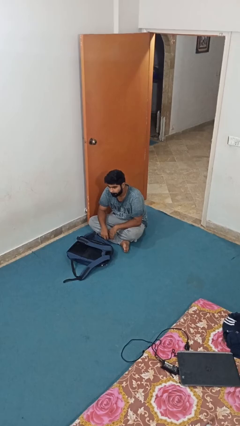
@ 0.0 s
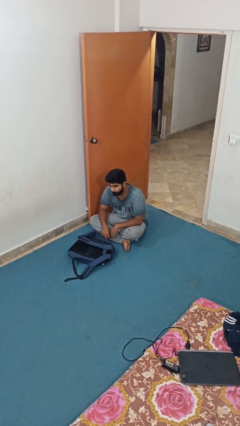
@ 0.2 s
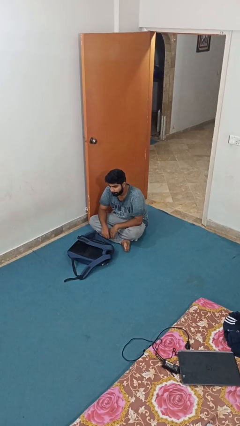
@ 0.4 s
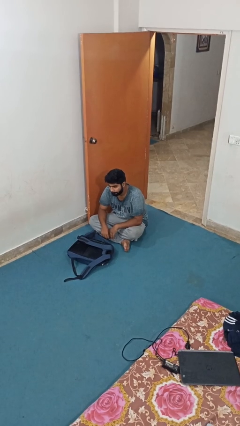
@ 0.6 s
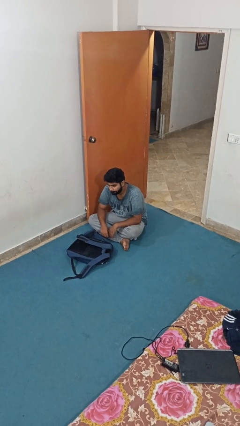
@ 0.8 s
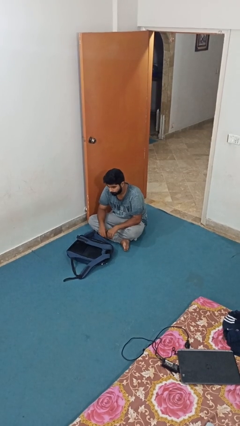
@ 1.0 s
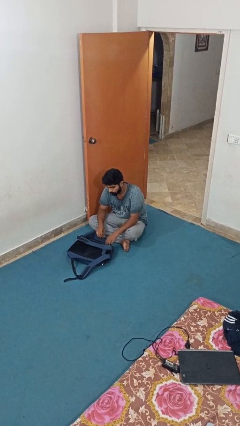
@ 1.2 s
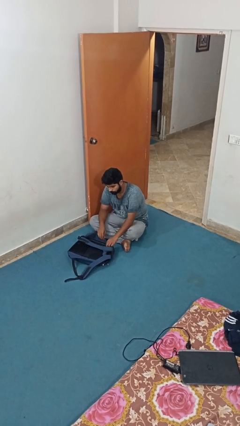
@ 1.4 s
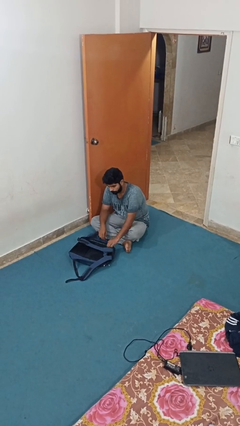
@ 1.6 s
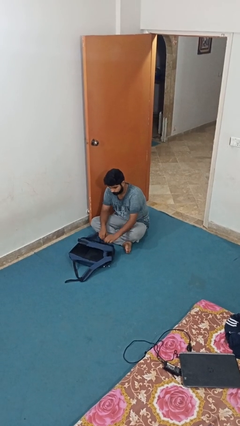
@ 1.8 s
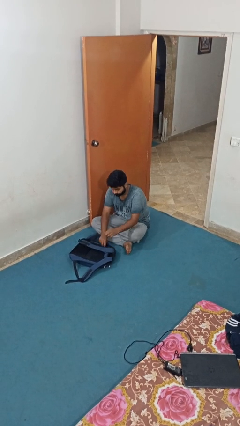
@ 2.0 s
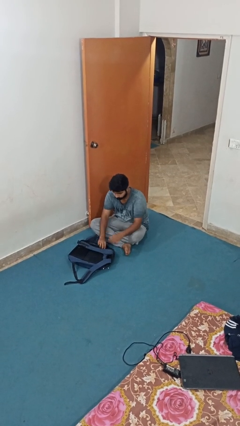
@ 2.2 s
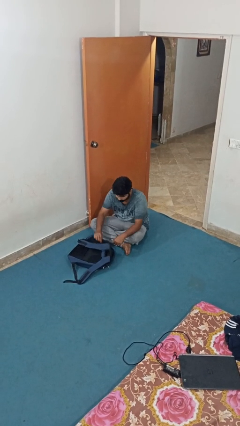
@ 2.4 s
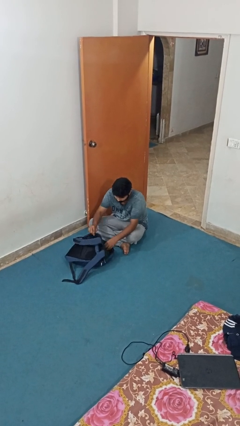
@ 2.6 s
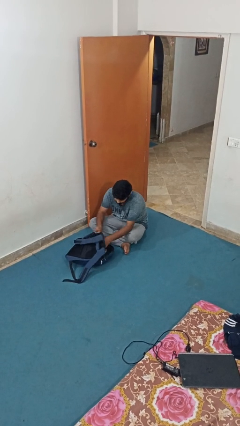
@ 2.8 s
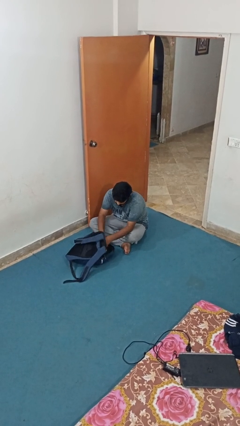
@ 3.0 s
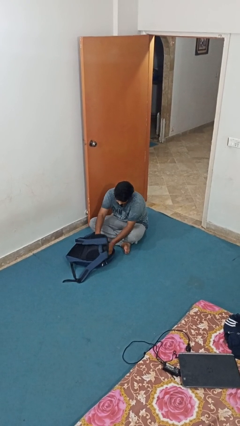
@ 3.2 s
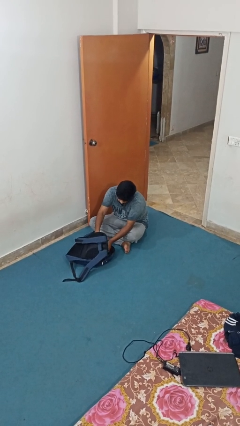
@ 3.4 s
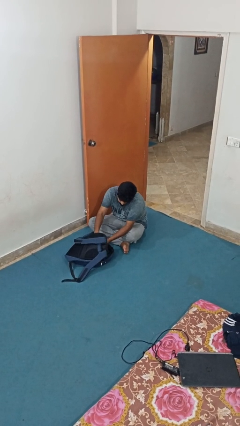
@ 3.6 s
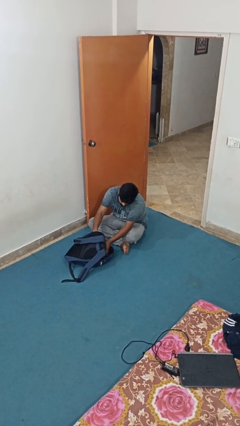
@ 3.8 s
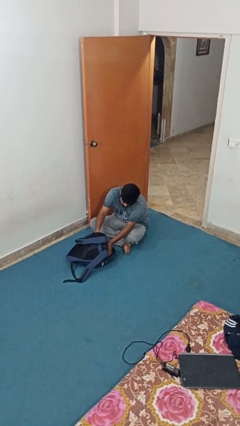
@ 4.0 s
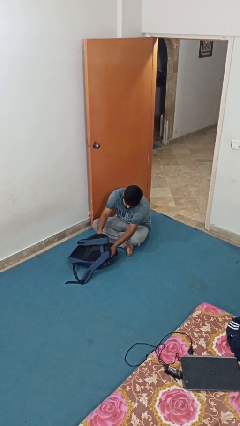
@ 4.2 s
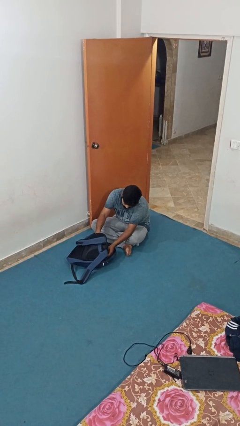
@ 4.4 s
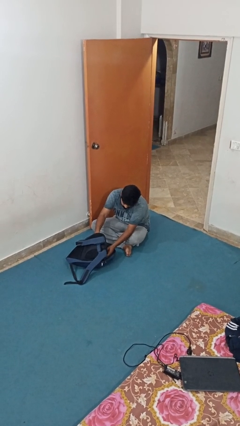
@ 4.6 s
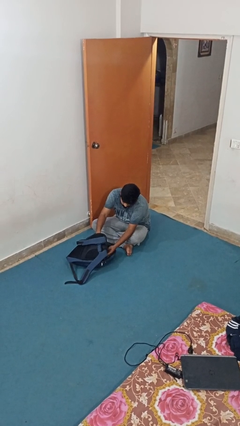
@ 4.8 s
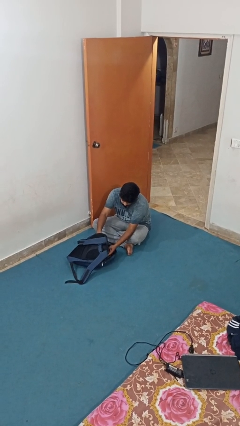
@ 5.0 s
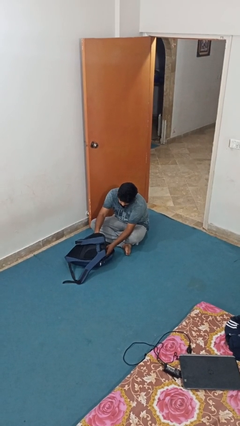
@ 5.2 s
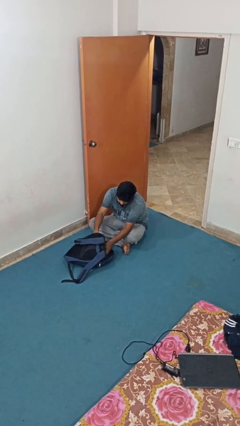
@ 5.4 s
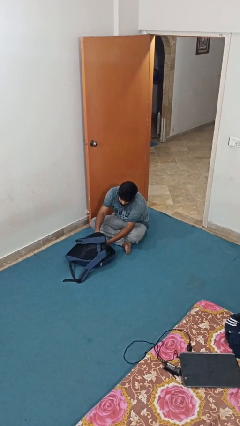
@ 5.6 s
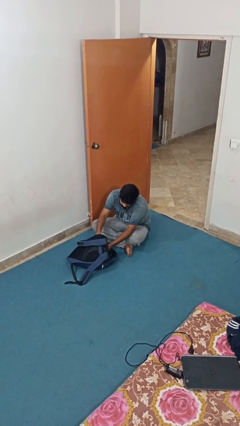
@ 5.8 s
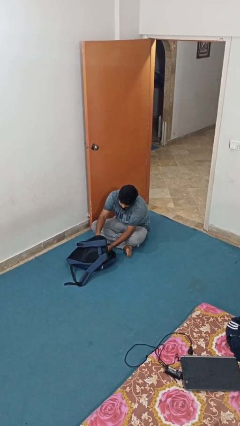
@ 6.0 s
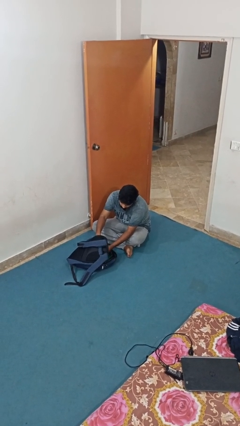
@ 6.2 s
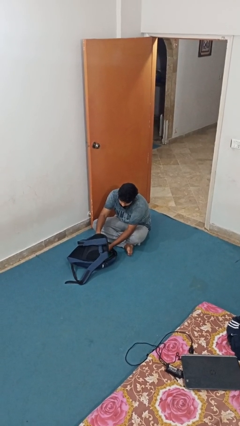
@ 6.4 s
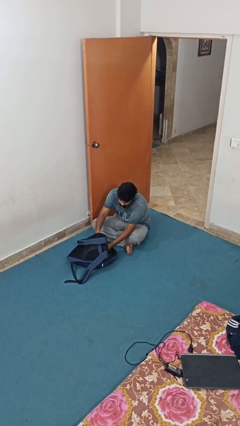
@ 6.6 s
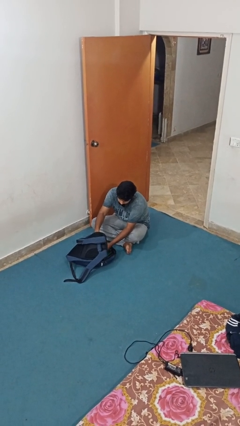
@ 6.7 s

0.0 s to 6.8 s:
person searches in backpack

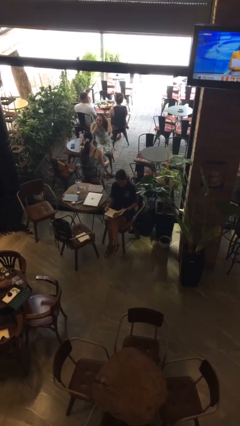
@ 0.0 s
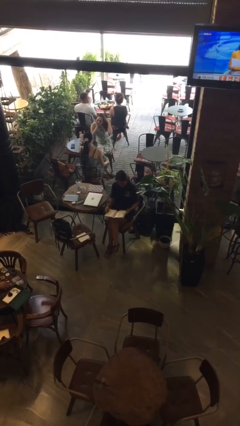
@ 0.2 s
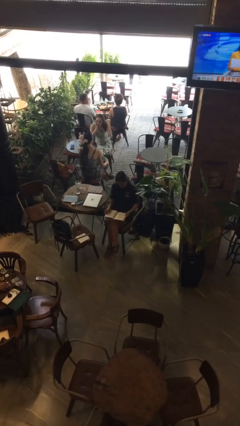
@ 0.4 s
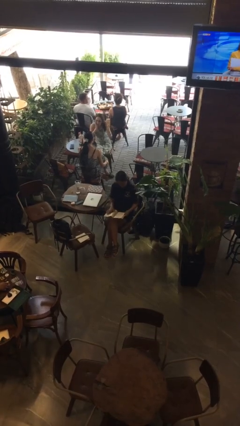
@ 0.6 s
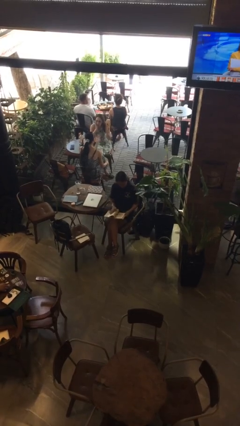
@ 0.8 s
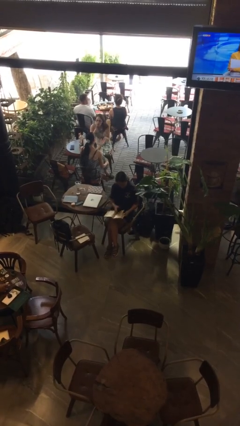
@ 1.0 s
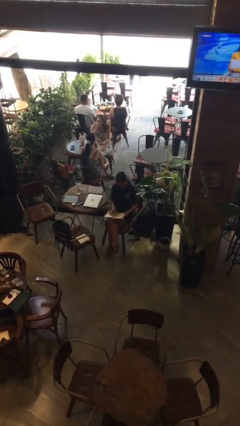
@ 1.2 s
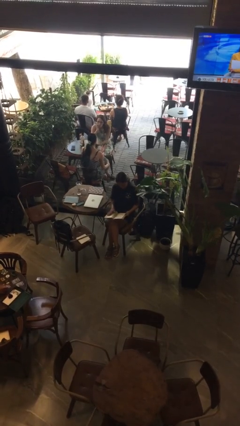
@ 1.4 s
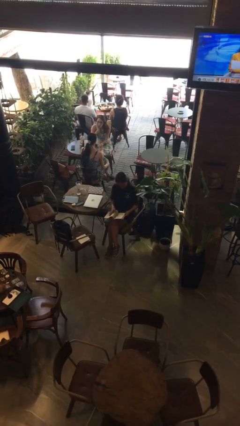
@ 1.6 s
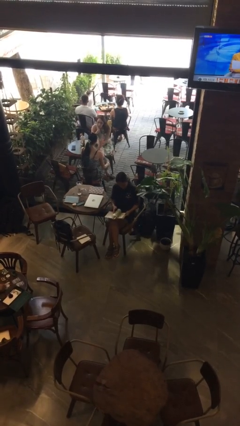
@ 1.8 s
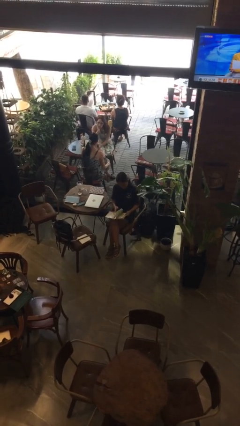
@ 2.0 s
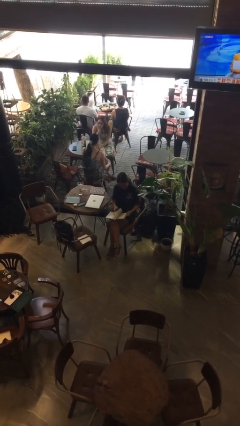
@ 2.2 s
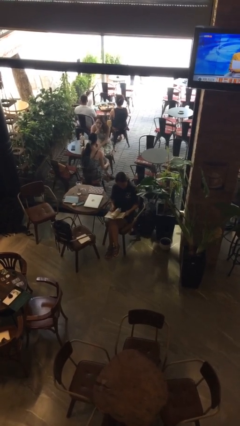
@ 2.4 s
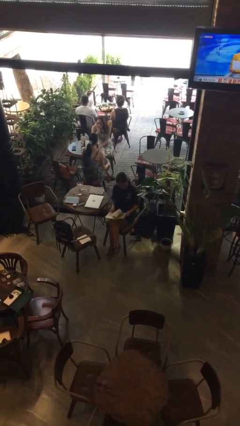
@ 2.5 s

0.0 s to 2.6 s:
person reads book

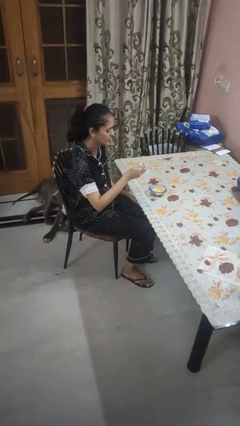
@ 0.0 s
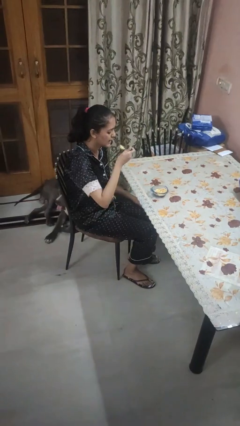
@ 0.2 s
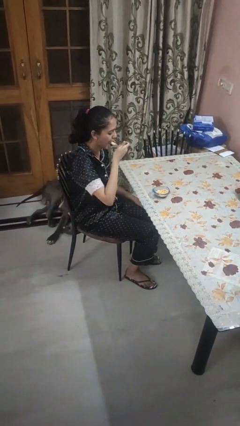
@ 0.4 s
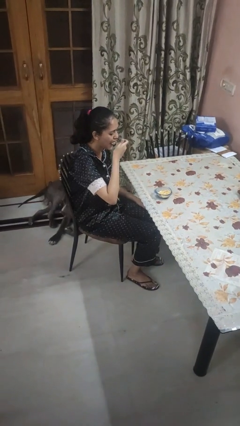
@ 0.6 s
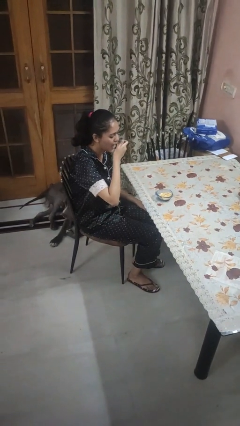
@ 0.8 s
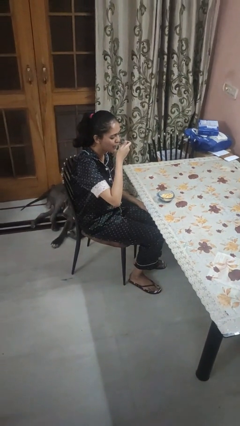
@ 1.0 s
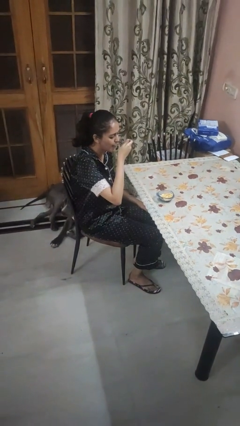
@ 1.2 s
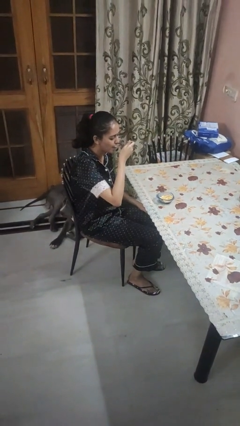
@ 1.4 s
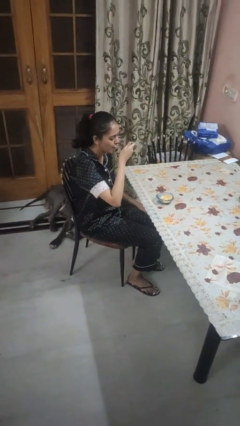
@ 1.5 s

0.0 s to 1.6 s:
person eats with utensil

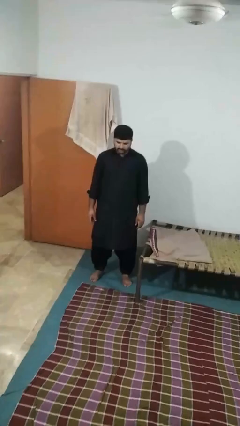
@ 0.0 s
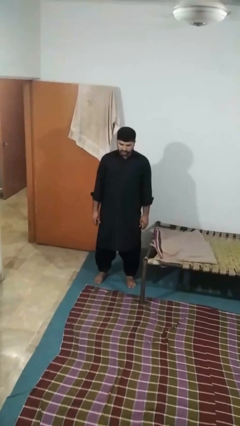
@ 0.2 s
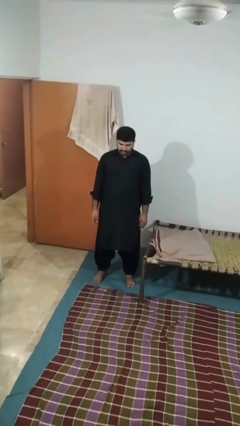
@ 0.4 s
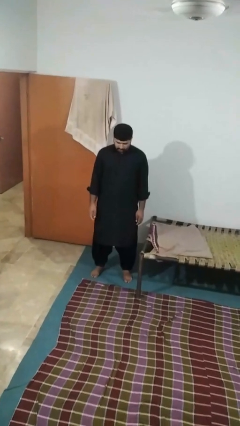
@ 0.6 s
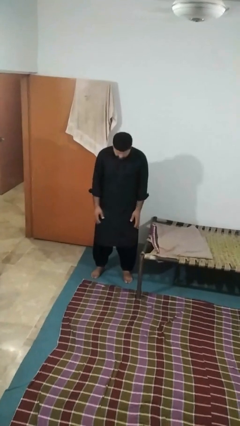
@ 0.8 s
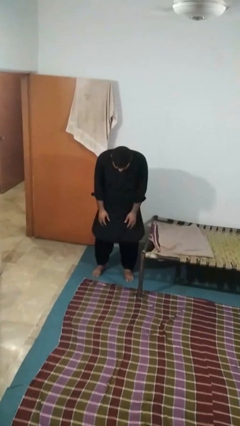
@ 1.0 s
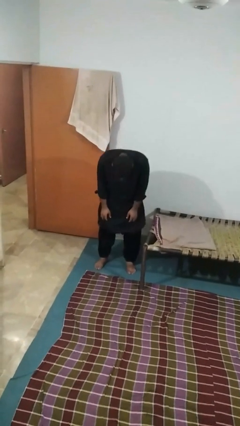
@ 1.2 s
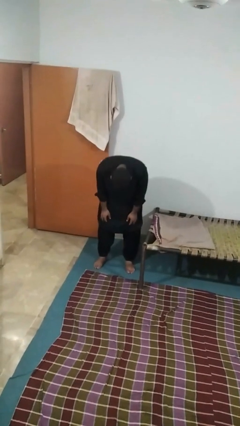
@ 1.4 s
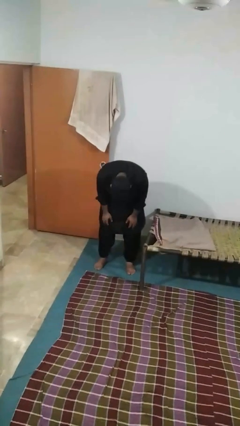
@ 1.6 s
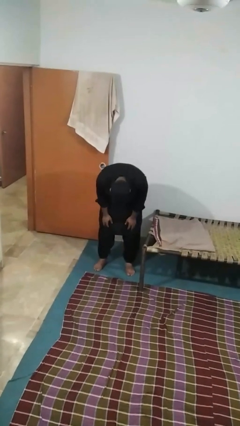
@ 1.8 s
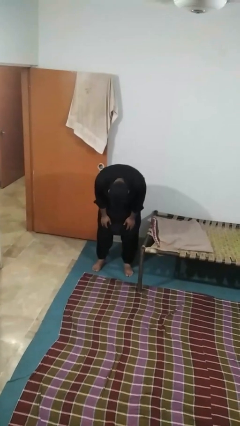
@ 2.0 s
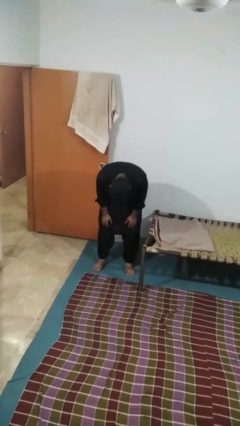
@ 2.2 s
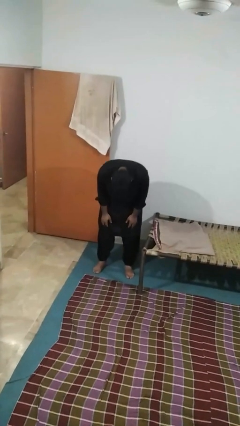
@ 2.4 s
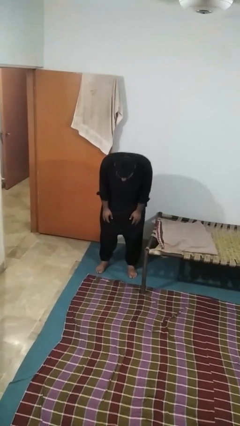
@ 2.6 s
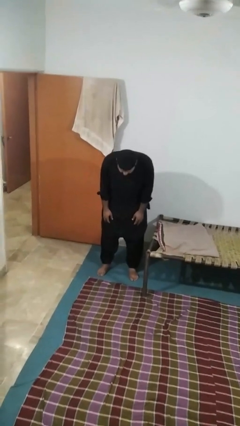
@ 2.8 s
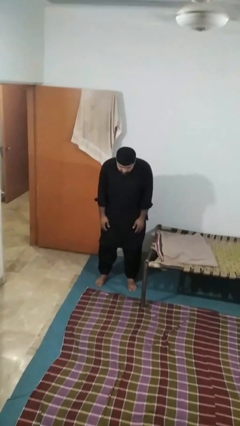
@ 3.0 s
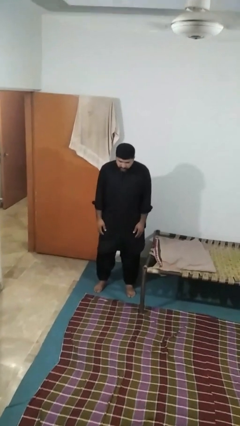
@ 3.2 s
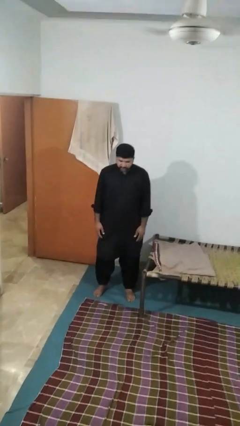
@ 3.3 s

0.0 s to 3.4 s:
person bows

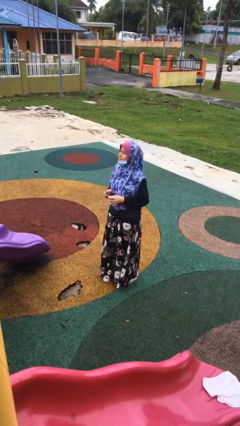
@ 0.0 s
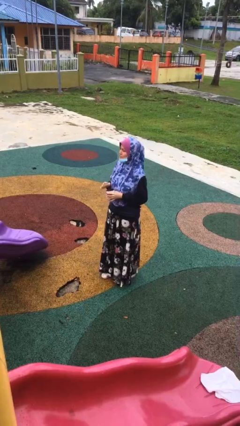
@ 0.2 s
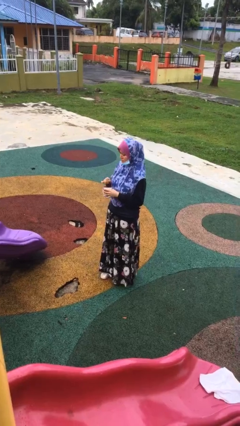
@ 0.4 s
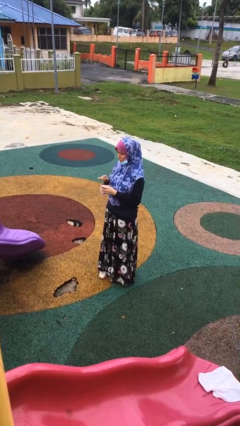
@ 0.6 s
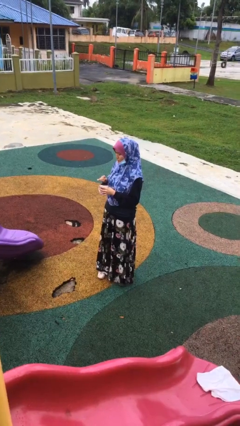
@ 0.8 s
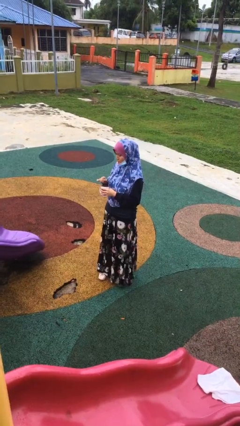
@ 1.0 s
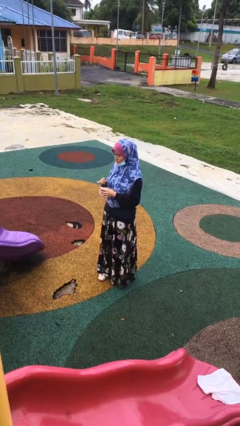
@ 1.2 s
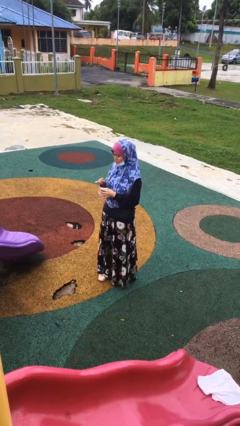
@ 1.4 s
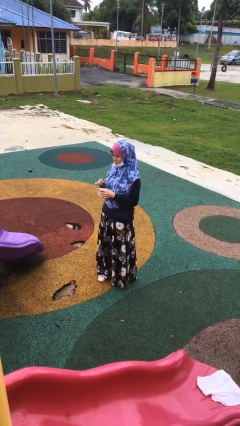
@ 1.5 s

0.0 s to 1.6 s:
person stirs mug

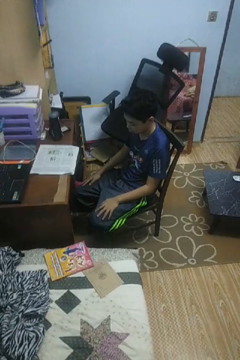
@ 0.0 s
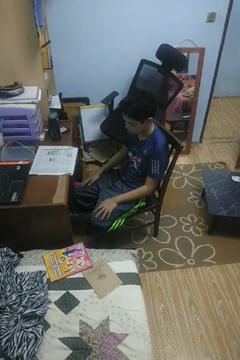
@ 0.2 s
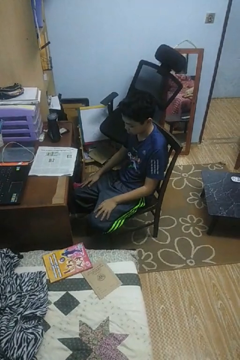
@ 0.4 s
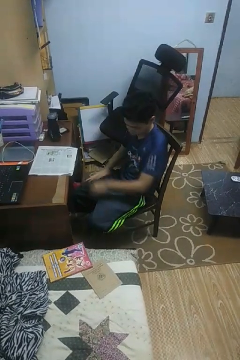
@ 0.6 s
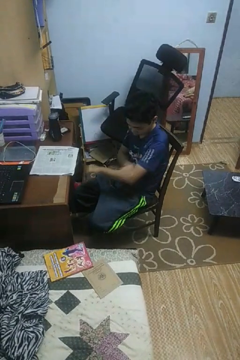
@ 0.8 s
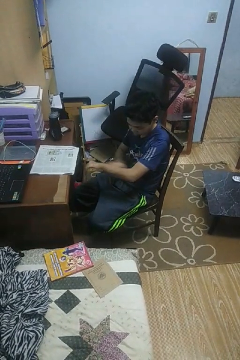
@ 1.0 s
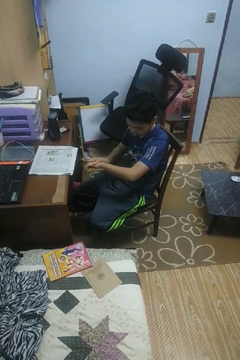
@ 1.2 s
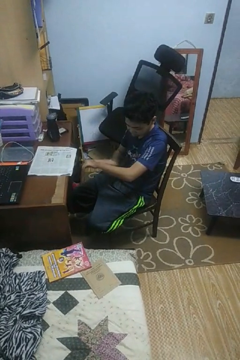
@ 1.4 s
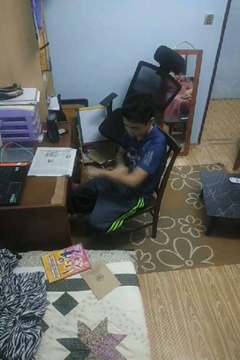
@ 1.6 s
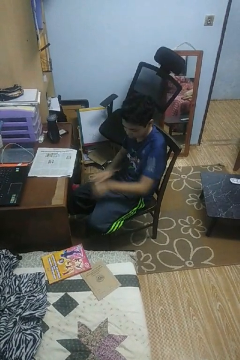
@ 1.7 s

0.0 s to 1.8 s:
person looks at hands in lap

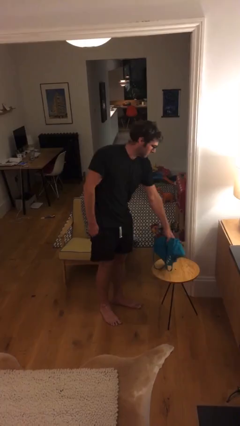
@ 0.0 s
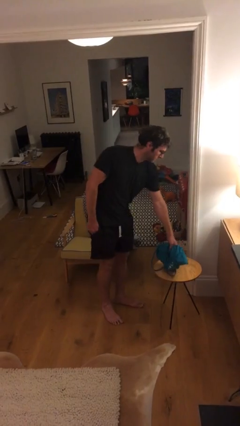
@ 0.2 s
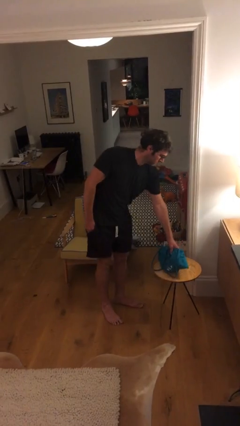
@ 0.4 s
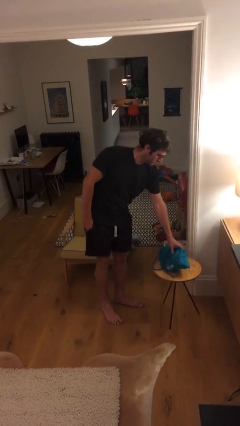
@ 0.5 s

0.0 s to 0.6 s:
person puts down object on table
